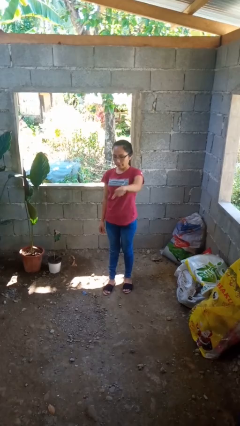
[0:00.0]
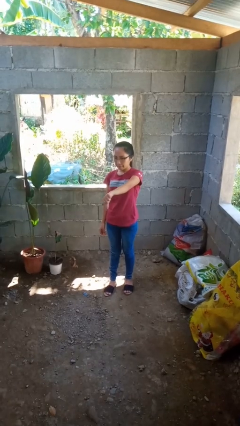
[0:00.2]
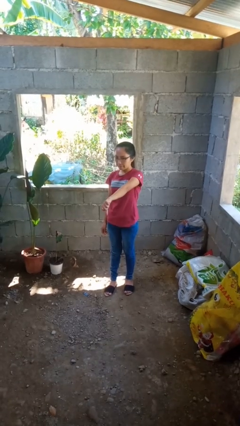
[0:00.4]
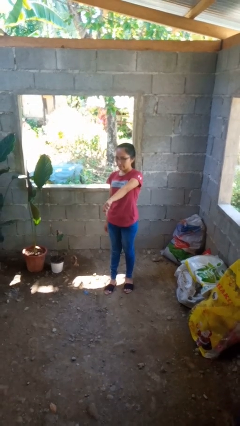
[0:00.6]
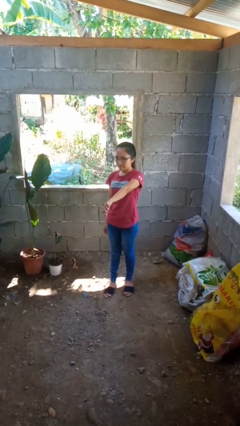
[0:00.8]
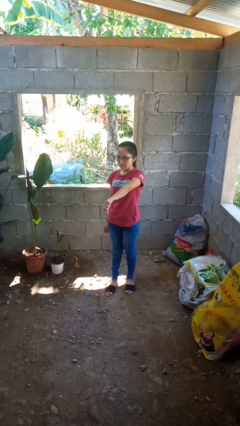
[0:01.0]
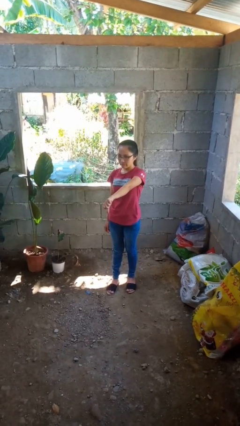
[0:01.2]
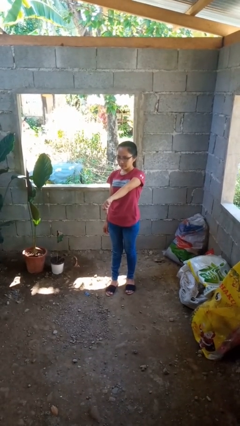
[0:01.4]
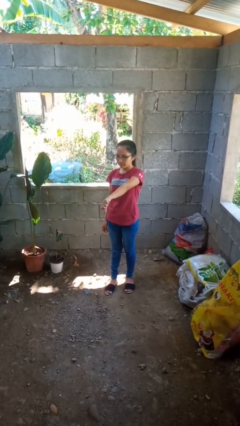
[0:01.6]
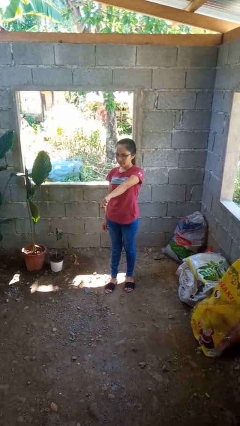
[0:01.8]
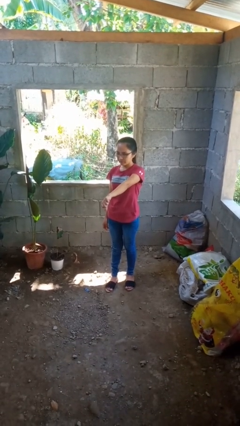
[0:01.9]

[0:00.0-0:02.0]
person gestures thumbs down

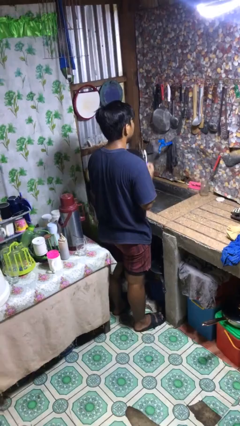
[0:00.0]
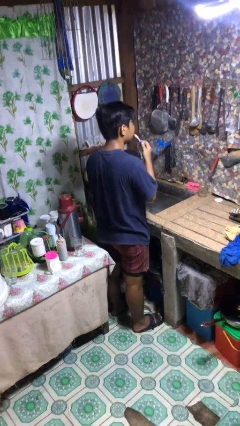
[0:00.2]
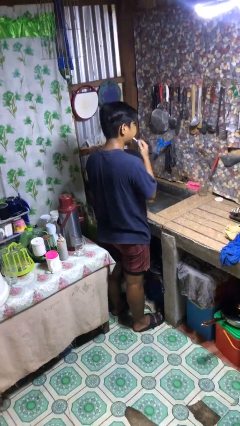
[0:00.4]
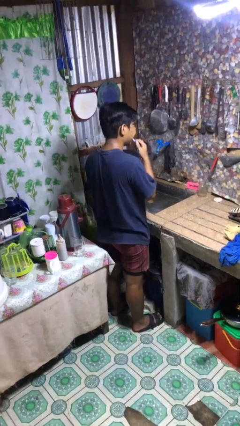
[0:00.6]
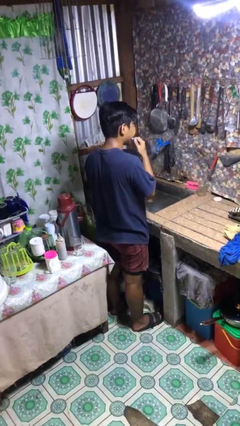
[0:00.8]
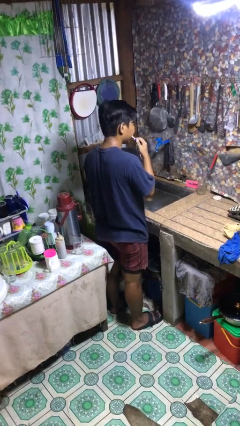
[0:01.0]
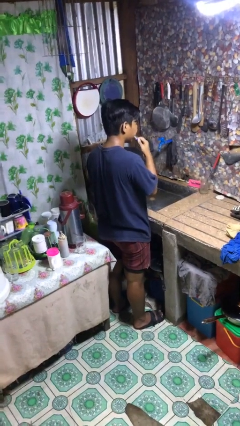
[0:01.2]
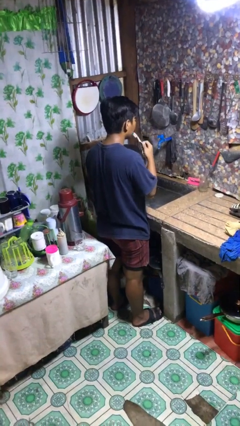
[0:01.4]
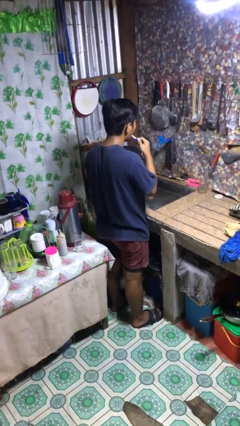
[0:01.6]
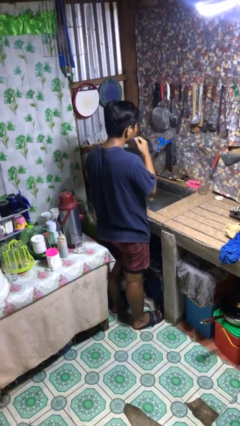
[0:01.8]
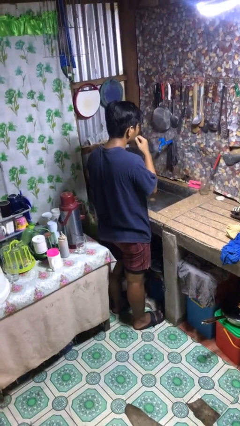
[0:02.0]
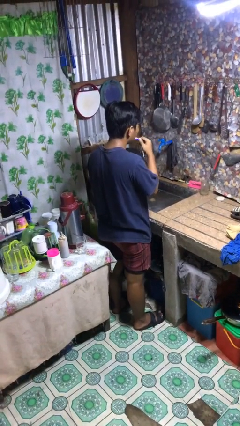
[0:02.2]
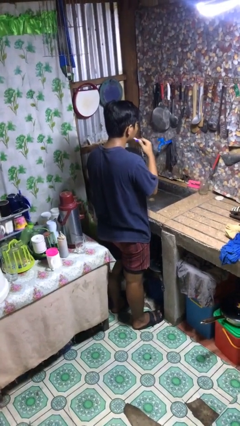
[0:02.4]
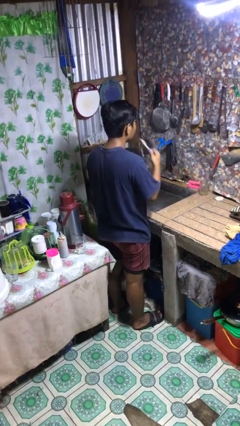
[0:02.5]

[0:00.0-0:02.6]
person brushes teeth

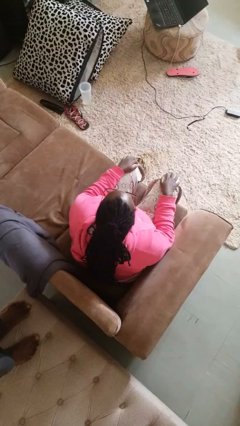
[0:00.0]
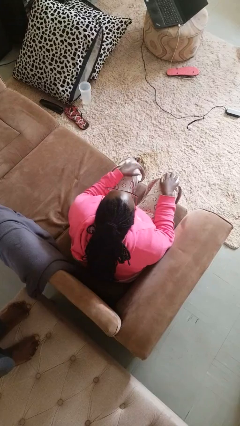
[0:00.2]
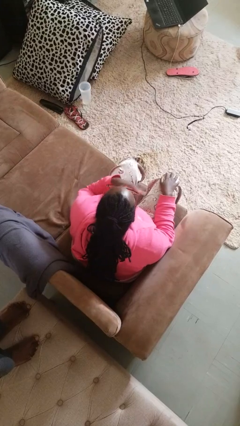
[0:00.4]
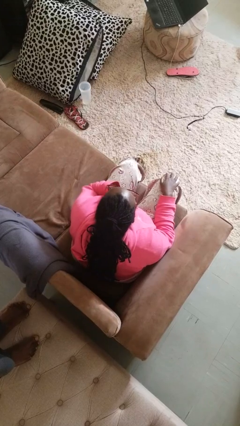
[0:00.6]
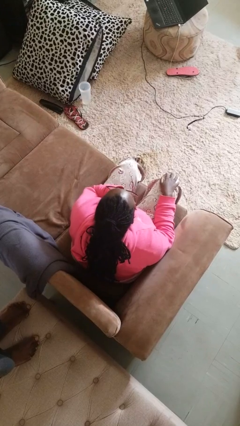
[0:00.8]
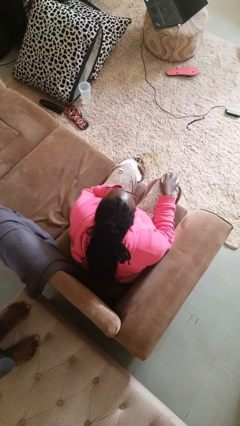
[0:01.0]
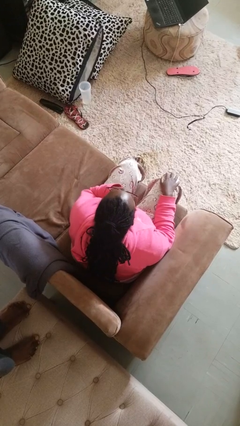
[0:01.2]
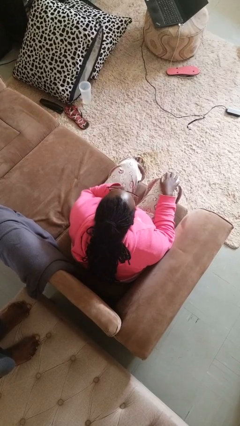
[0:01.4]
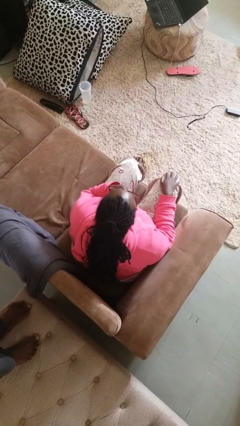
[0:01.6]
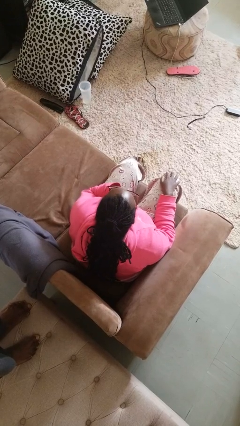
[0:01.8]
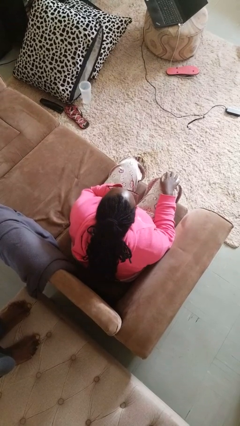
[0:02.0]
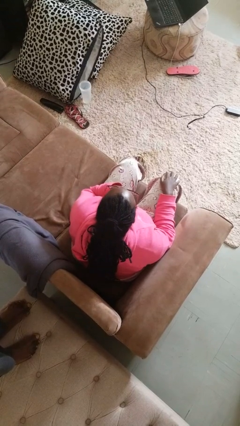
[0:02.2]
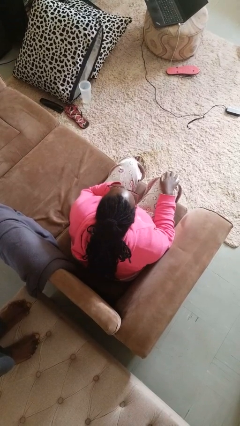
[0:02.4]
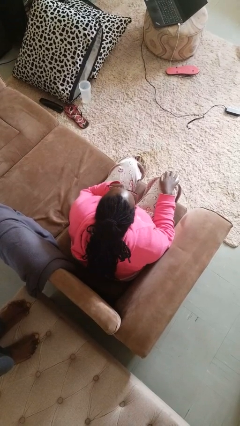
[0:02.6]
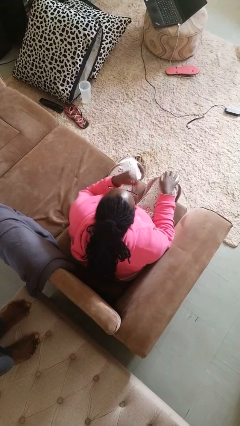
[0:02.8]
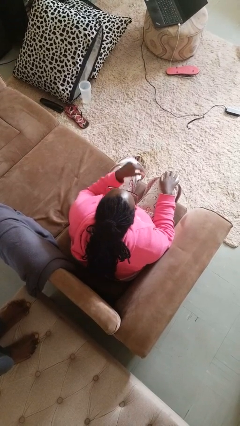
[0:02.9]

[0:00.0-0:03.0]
person strokes chin

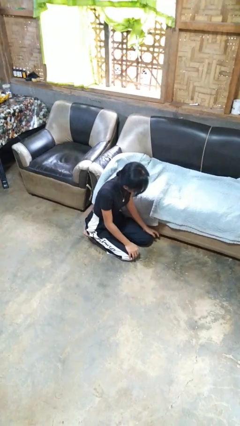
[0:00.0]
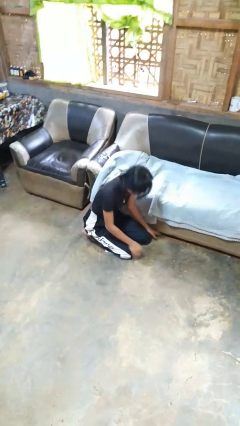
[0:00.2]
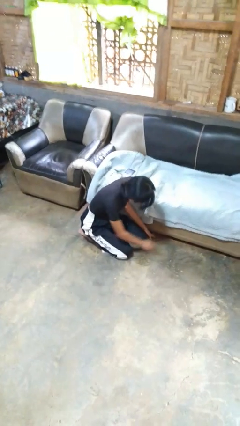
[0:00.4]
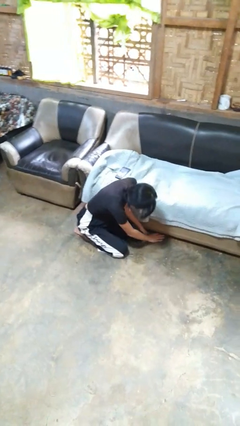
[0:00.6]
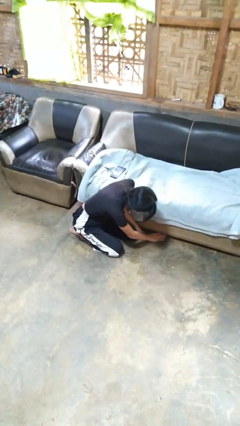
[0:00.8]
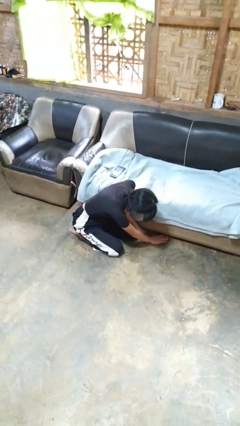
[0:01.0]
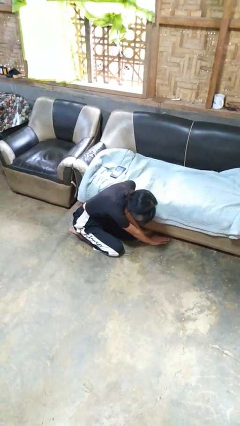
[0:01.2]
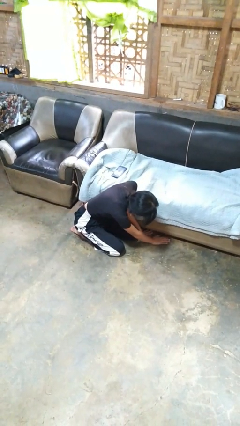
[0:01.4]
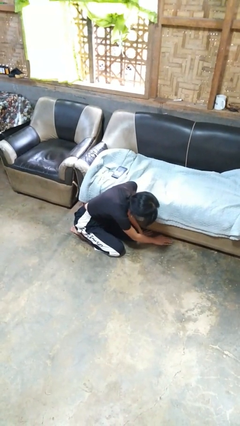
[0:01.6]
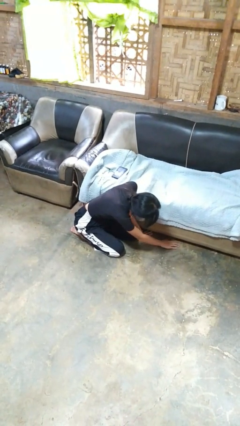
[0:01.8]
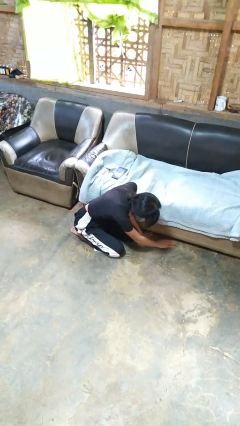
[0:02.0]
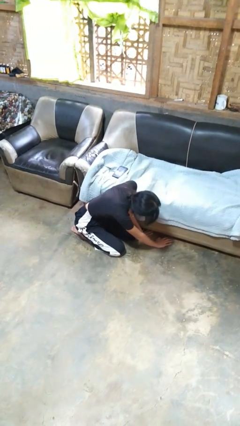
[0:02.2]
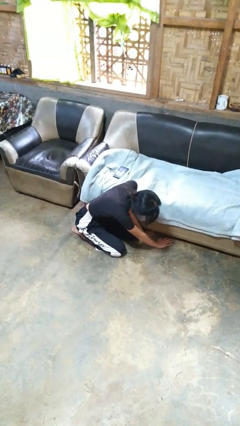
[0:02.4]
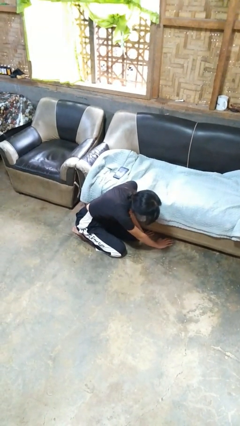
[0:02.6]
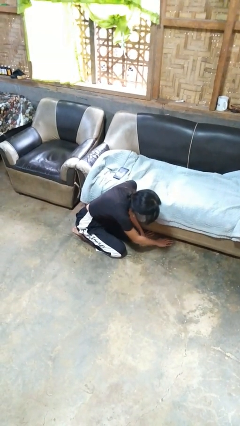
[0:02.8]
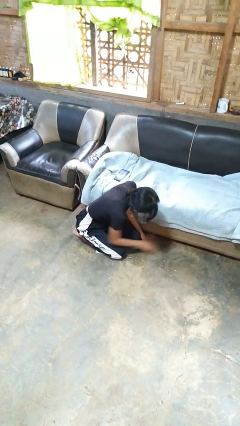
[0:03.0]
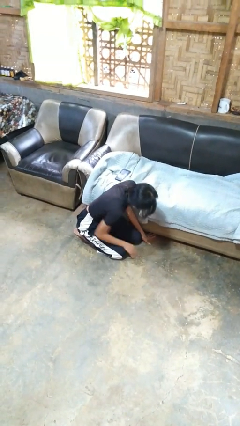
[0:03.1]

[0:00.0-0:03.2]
person searches under couch

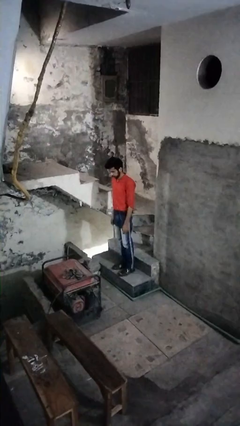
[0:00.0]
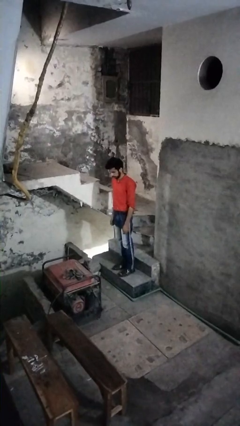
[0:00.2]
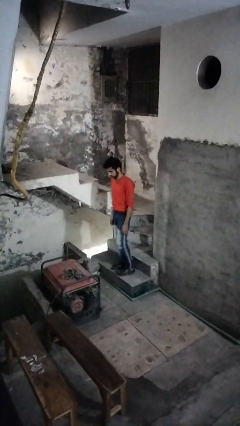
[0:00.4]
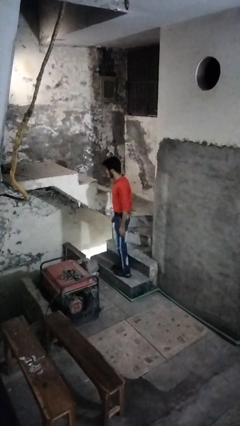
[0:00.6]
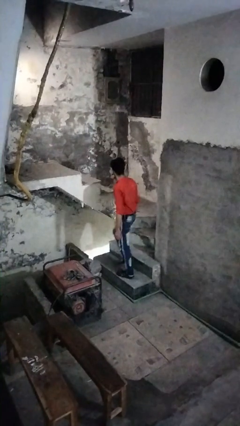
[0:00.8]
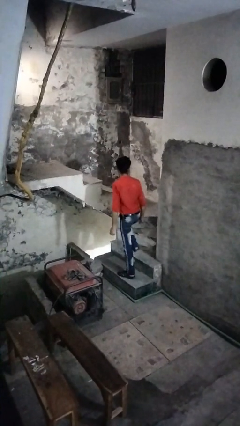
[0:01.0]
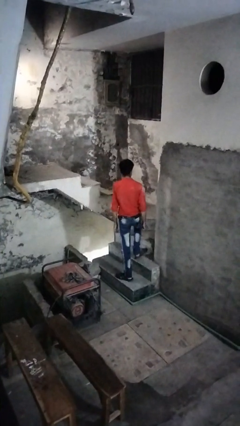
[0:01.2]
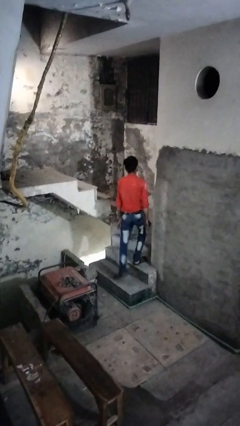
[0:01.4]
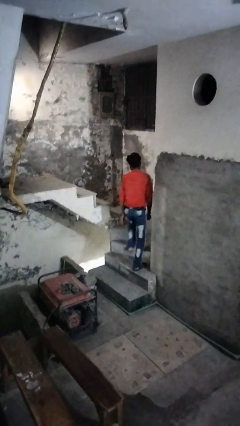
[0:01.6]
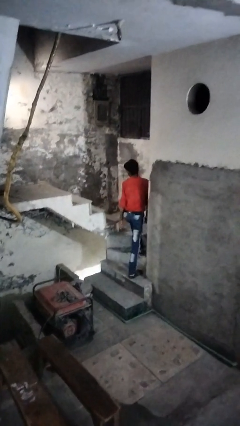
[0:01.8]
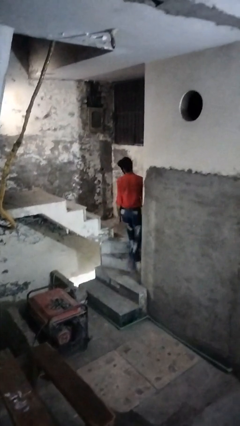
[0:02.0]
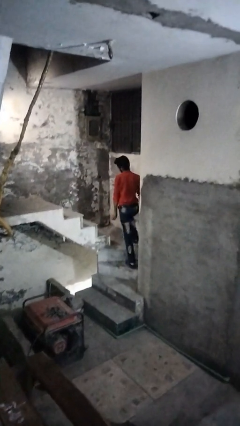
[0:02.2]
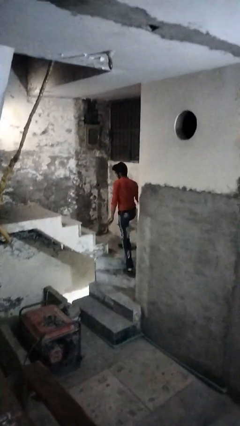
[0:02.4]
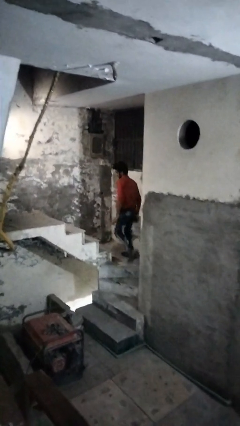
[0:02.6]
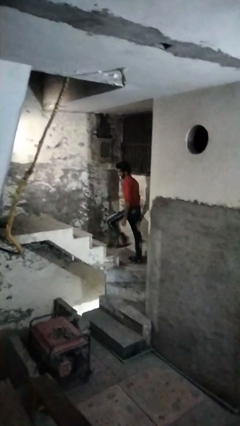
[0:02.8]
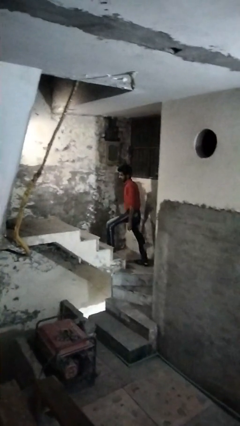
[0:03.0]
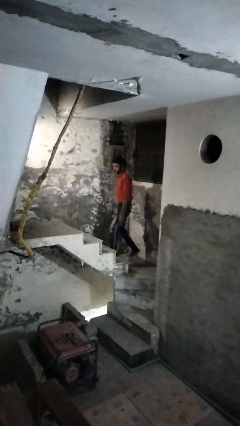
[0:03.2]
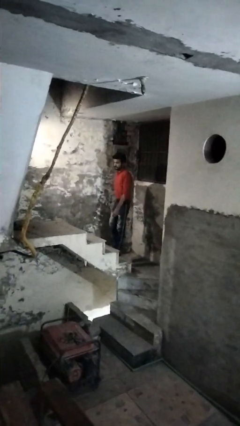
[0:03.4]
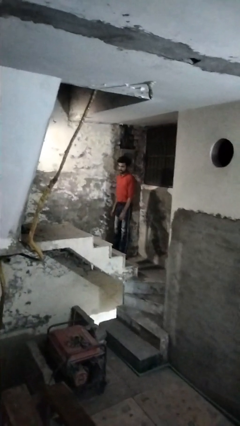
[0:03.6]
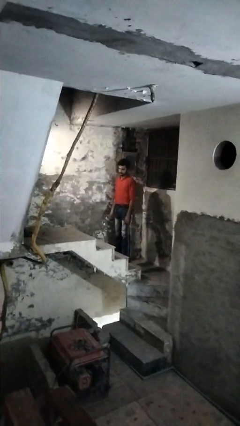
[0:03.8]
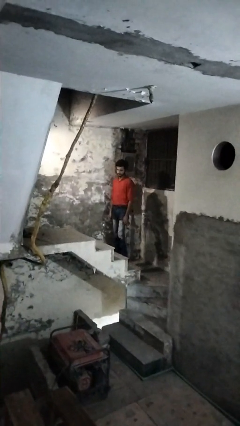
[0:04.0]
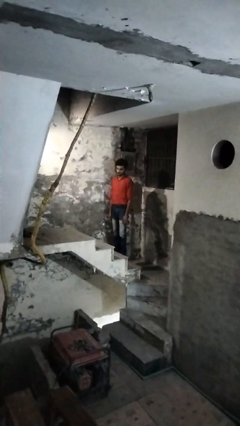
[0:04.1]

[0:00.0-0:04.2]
person climbs up stairs

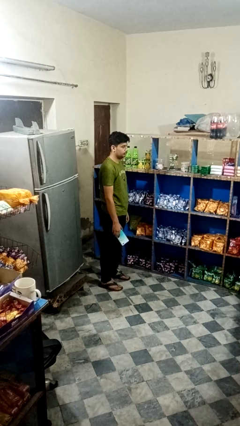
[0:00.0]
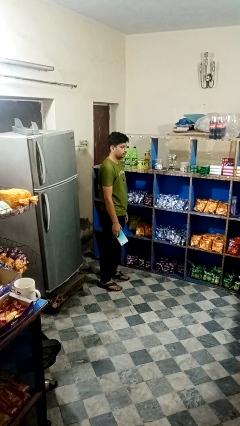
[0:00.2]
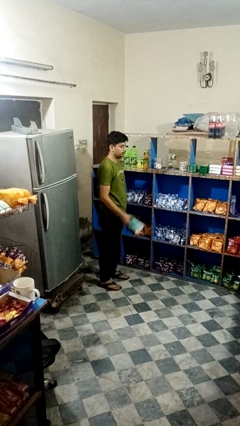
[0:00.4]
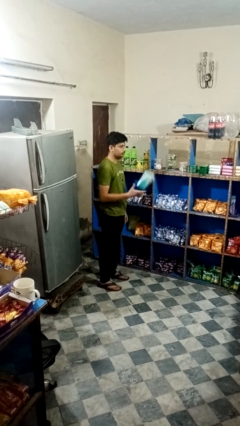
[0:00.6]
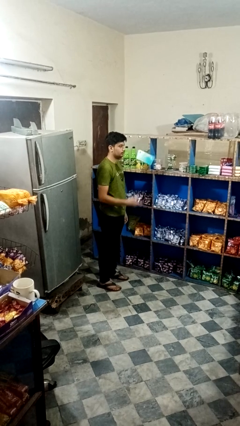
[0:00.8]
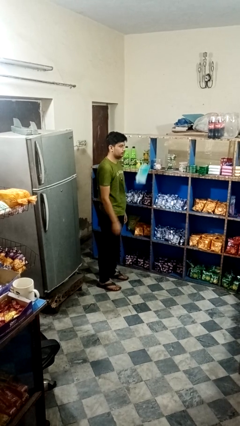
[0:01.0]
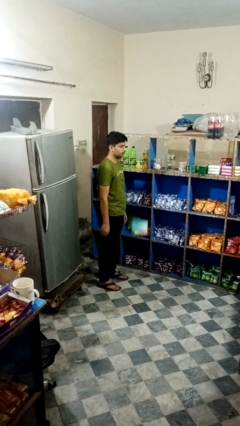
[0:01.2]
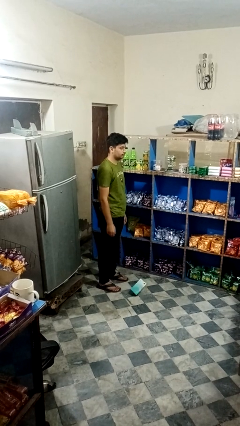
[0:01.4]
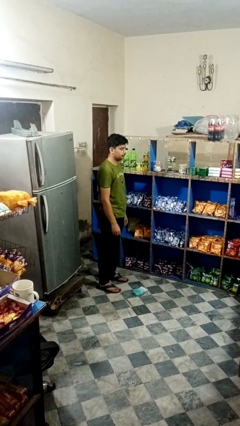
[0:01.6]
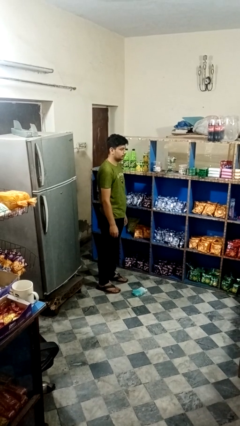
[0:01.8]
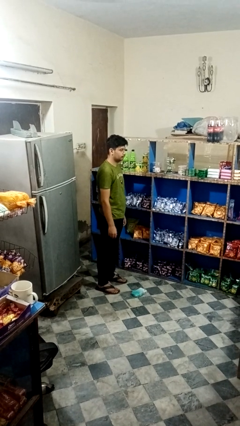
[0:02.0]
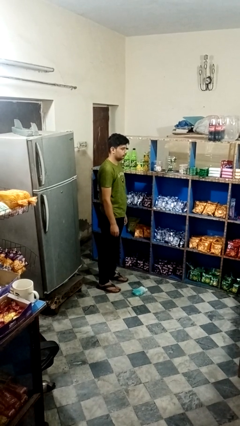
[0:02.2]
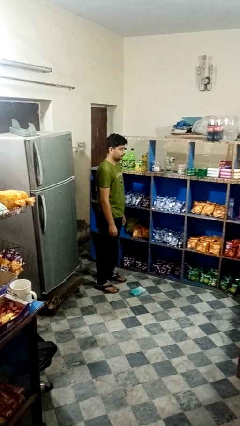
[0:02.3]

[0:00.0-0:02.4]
person throws object into air
